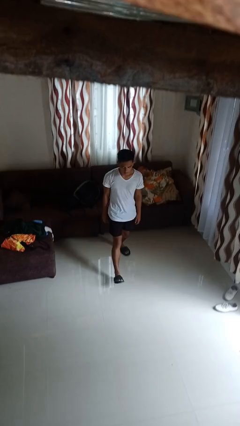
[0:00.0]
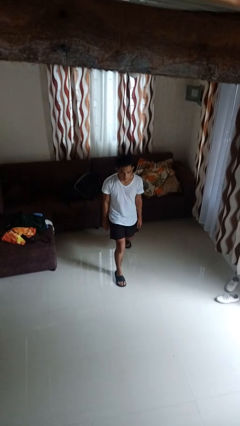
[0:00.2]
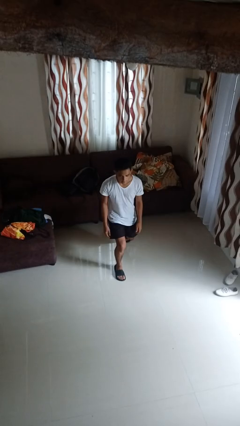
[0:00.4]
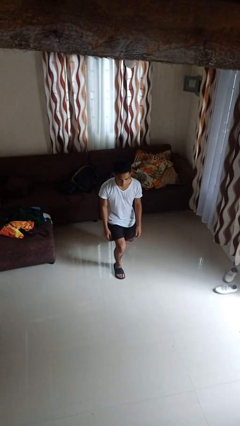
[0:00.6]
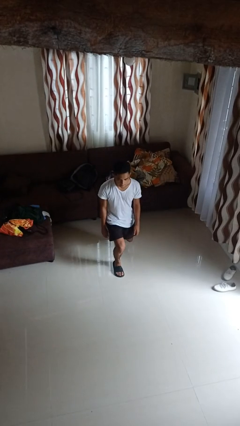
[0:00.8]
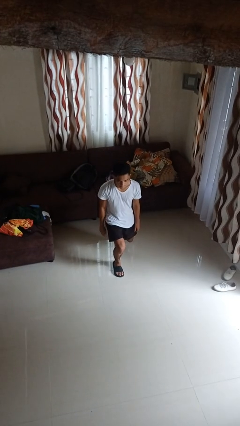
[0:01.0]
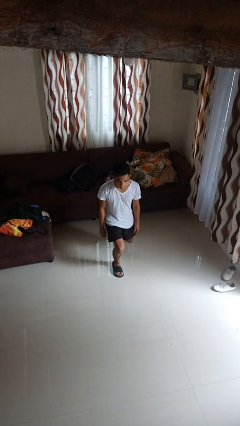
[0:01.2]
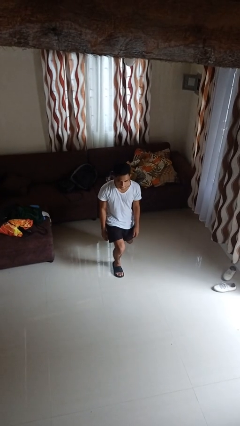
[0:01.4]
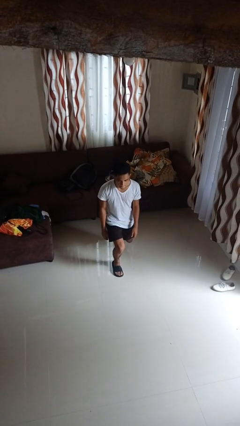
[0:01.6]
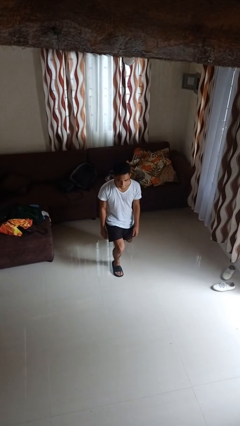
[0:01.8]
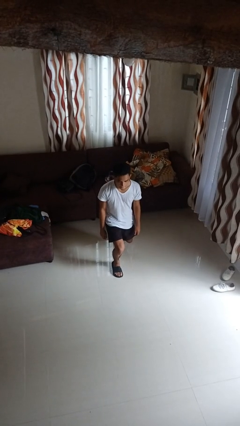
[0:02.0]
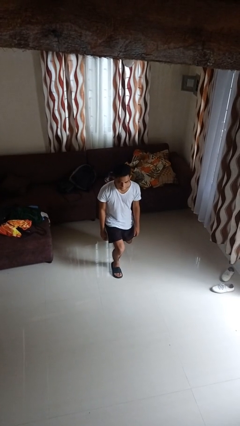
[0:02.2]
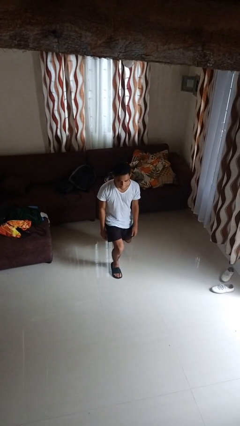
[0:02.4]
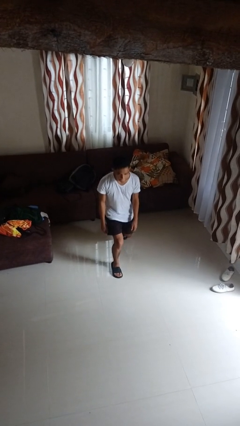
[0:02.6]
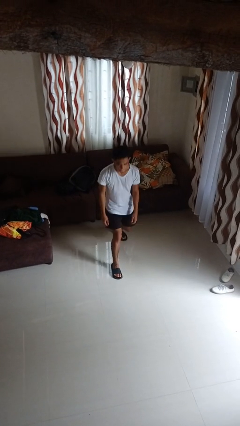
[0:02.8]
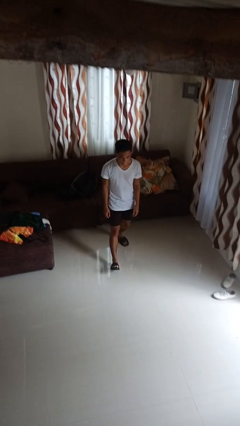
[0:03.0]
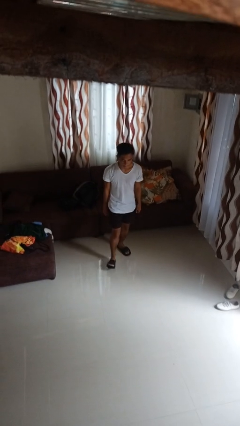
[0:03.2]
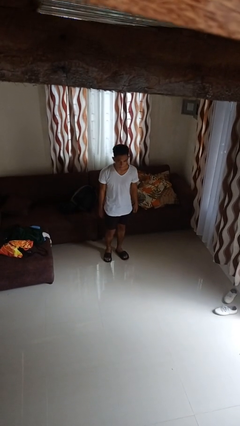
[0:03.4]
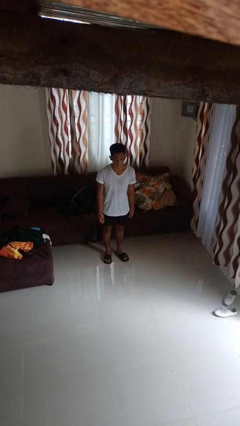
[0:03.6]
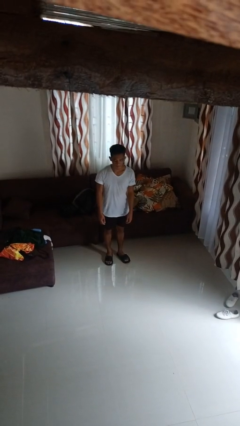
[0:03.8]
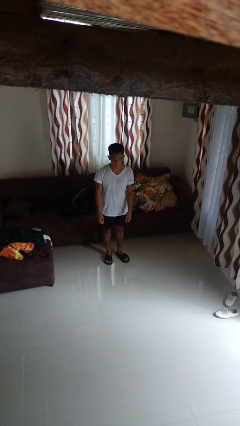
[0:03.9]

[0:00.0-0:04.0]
person exercises with lunges

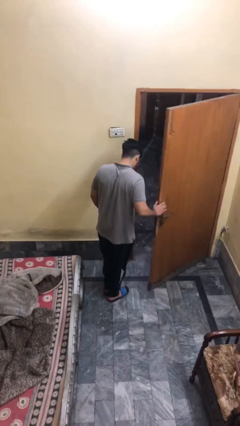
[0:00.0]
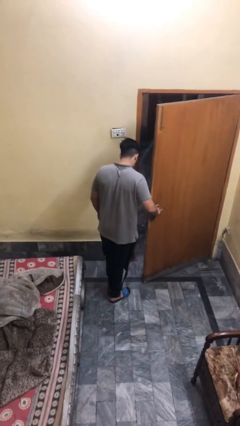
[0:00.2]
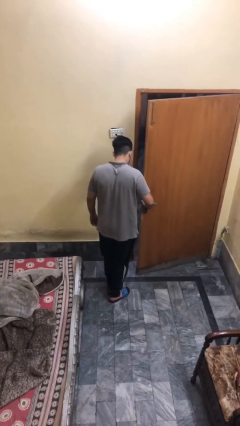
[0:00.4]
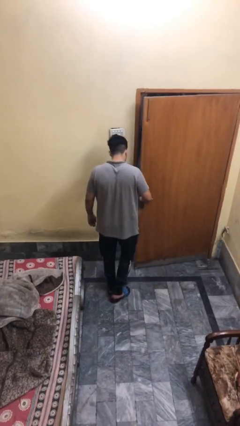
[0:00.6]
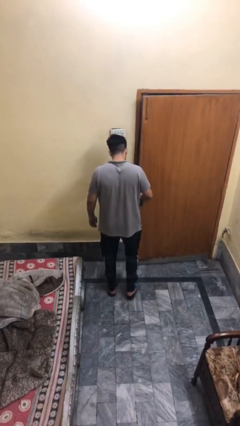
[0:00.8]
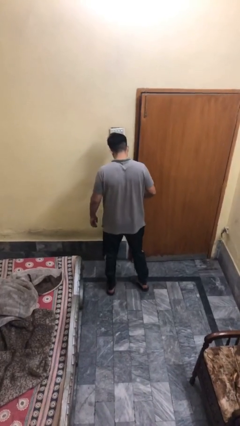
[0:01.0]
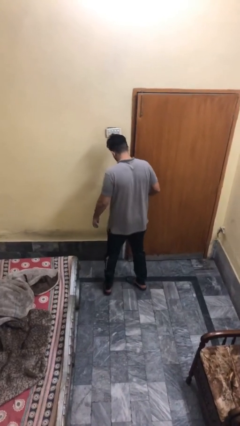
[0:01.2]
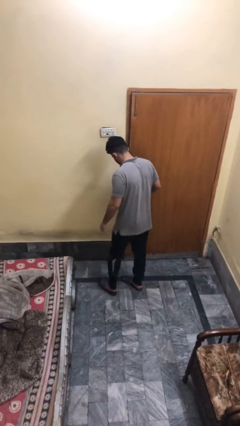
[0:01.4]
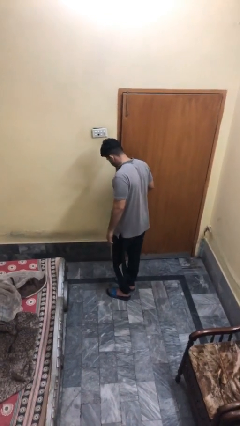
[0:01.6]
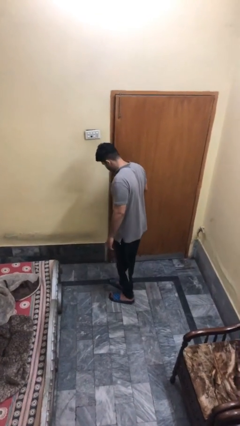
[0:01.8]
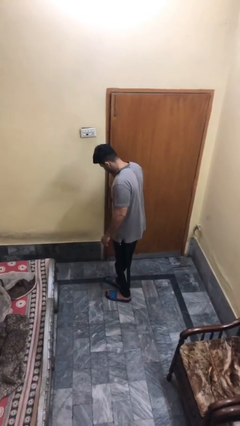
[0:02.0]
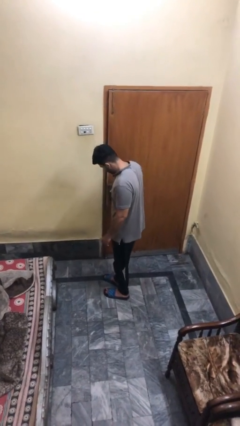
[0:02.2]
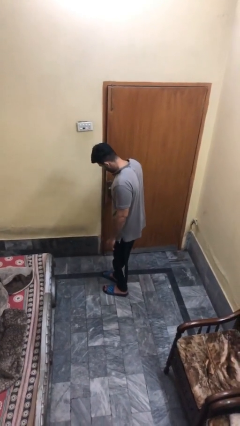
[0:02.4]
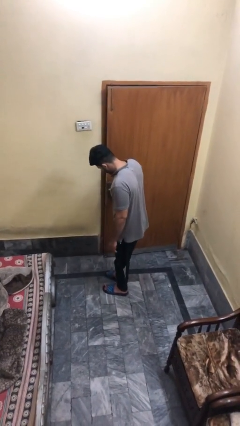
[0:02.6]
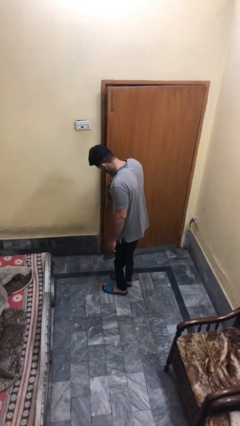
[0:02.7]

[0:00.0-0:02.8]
person closes facility door

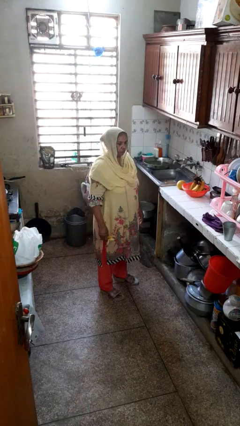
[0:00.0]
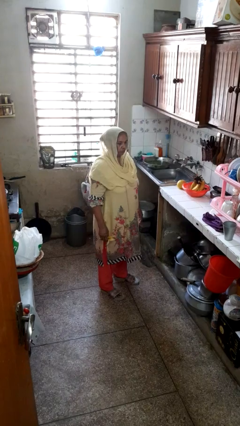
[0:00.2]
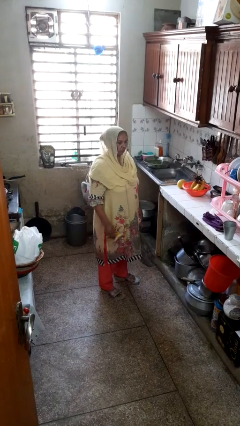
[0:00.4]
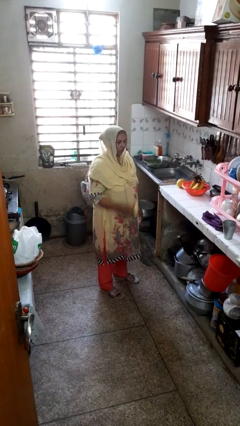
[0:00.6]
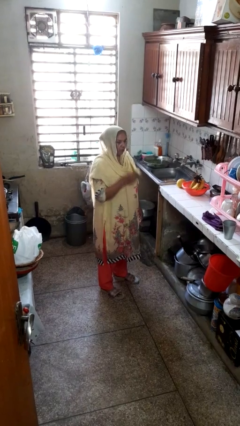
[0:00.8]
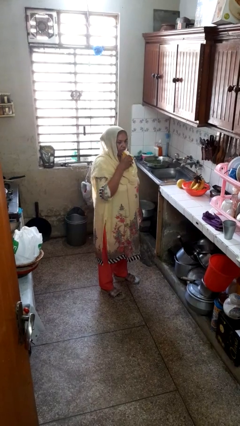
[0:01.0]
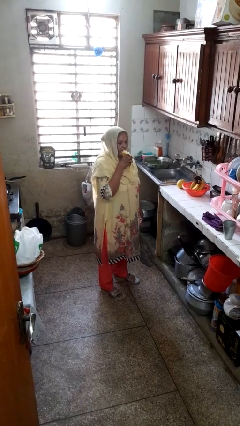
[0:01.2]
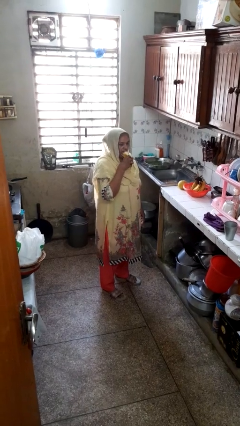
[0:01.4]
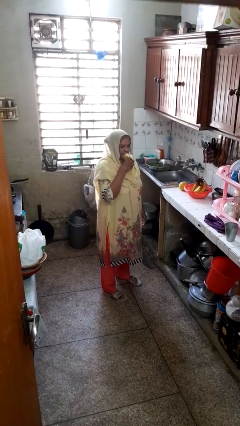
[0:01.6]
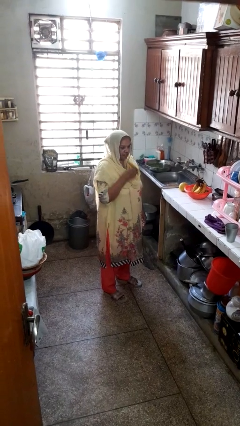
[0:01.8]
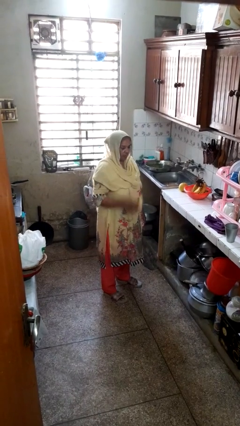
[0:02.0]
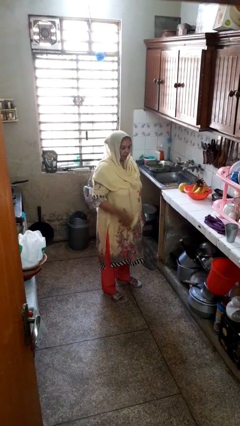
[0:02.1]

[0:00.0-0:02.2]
person eats banana

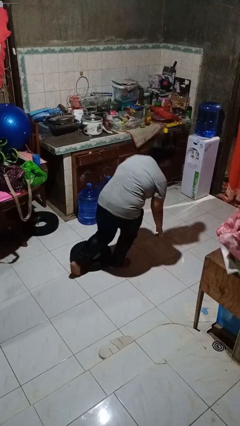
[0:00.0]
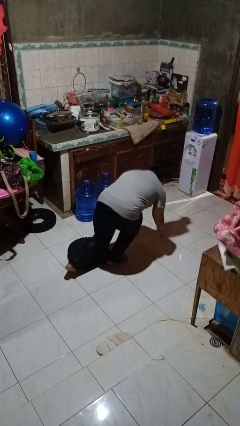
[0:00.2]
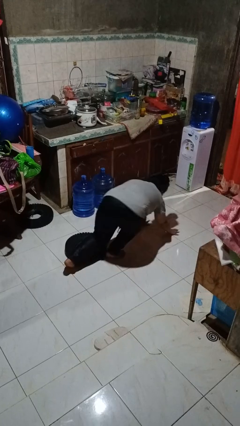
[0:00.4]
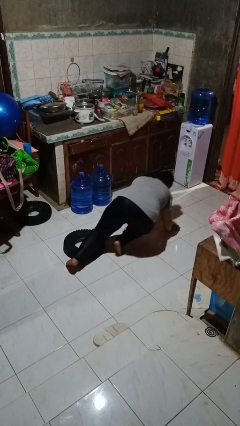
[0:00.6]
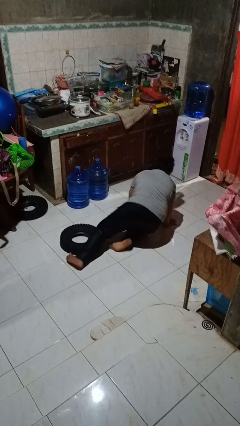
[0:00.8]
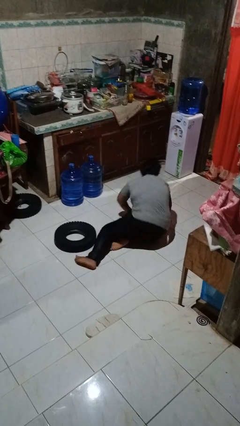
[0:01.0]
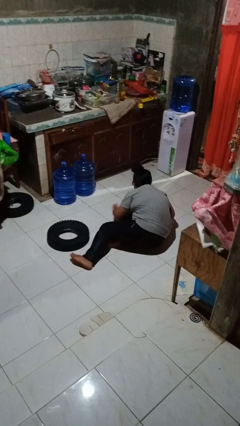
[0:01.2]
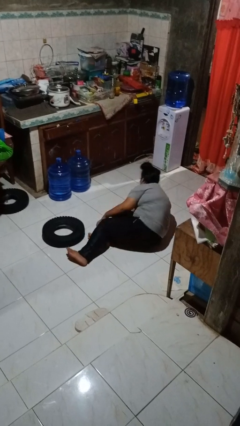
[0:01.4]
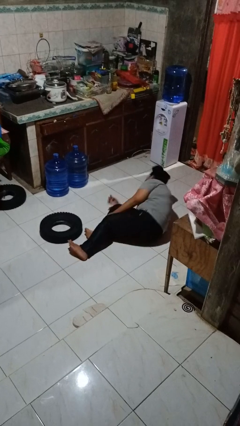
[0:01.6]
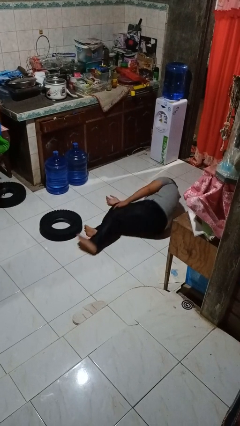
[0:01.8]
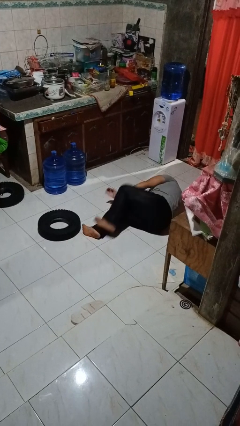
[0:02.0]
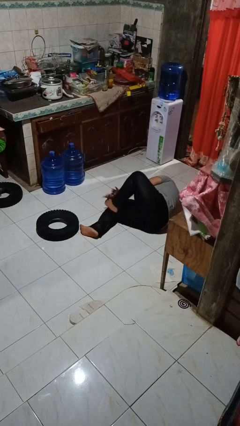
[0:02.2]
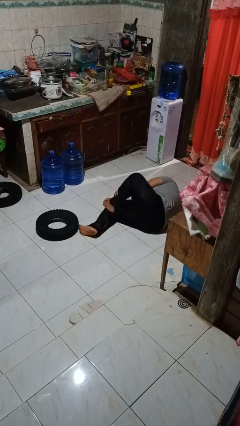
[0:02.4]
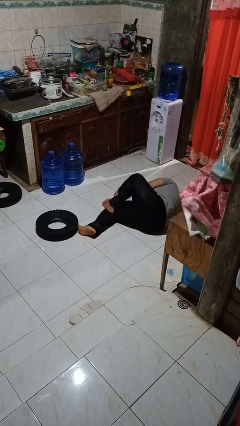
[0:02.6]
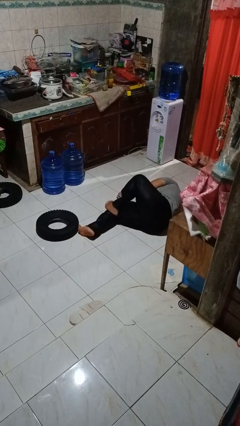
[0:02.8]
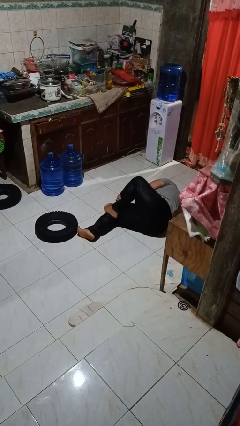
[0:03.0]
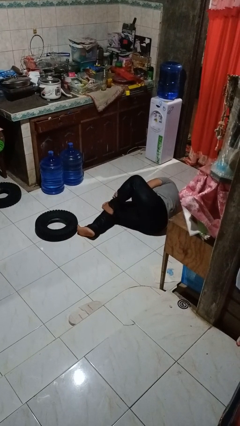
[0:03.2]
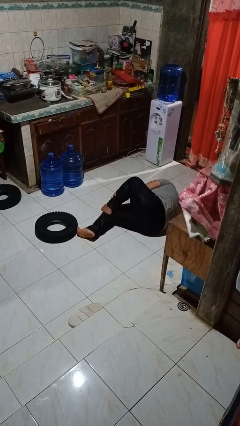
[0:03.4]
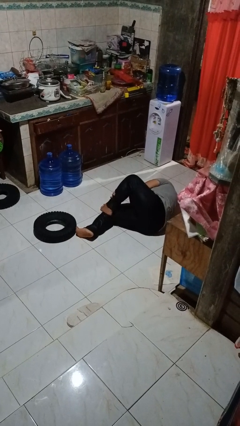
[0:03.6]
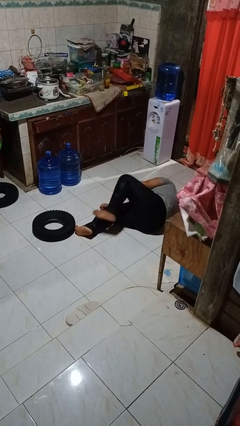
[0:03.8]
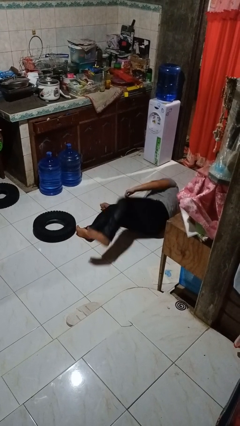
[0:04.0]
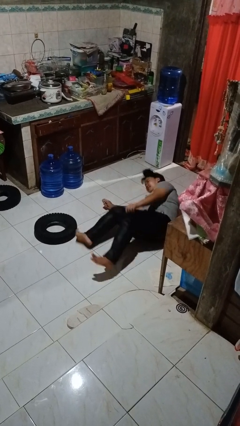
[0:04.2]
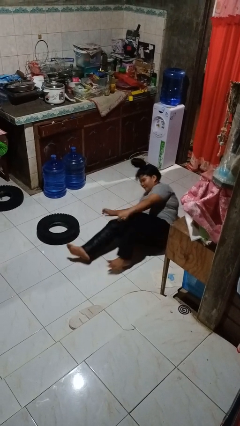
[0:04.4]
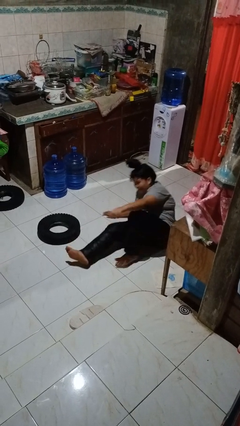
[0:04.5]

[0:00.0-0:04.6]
person lies down on floor

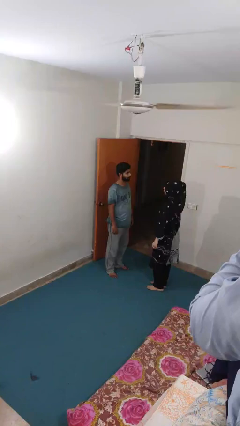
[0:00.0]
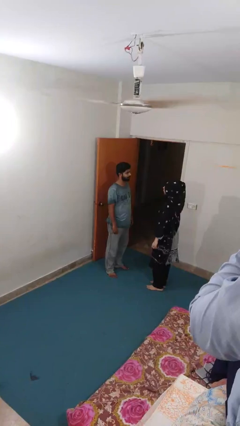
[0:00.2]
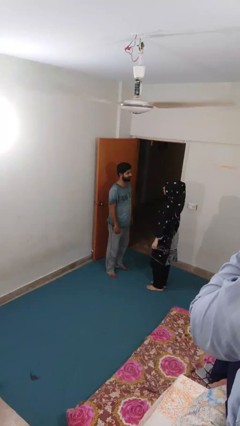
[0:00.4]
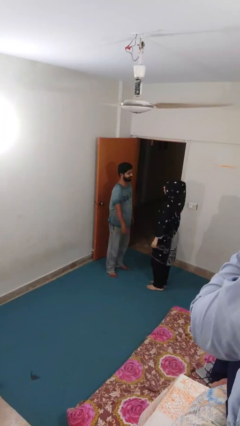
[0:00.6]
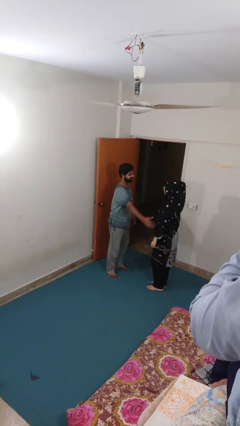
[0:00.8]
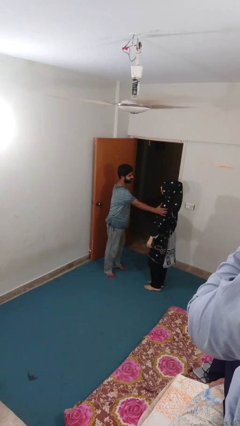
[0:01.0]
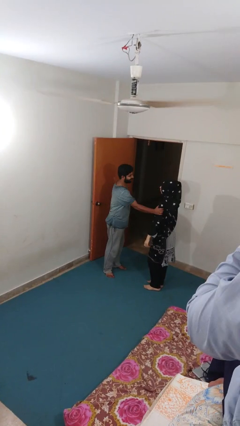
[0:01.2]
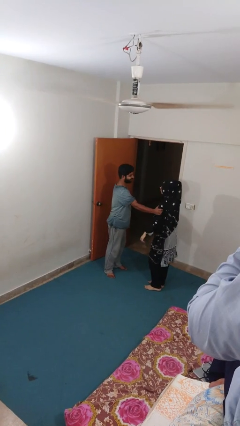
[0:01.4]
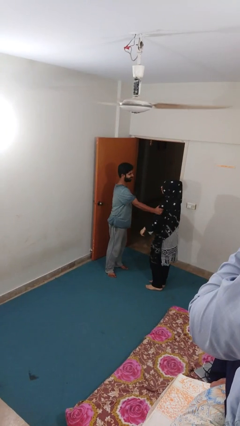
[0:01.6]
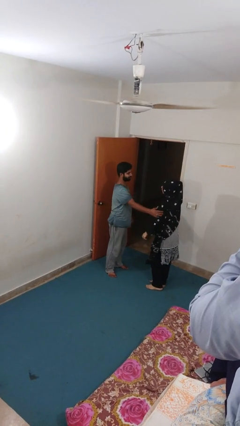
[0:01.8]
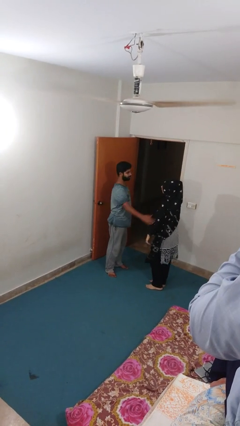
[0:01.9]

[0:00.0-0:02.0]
person grabs person by bicep

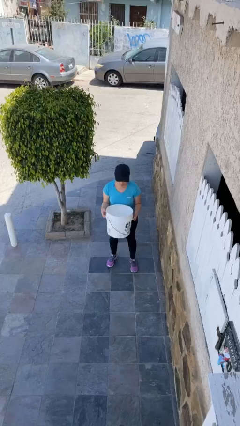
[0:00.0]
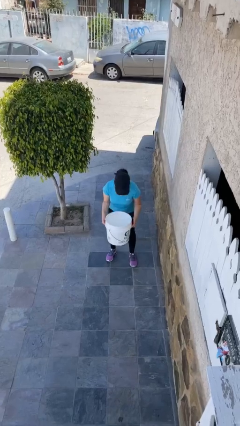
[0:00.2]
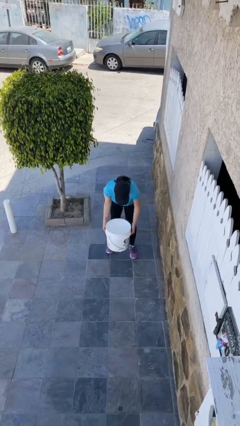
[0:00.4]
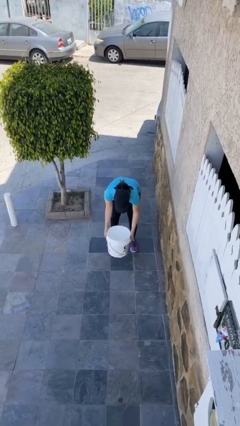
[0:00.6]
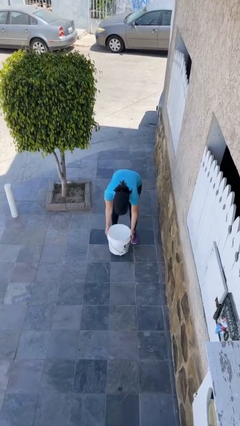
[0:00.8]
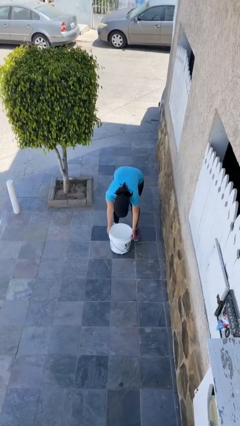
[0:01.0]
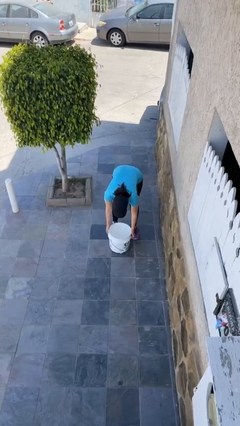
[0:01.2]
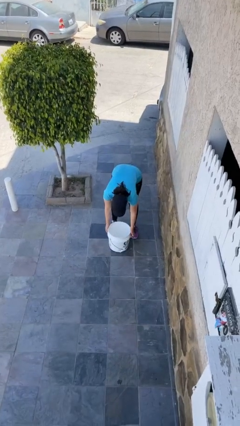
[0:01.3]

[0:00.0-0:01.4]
person puts down object on floor

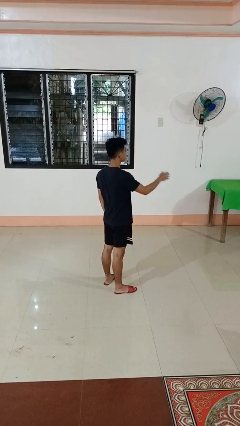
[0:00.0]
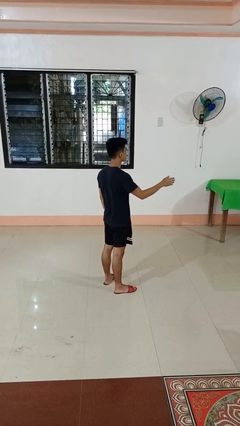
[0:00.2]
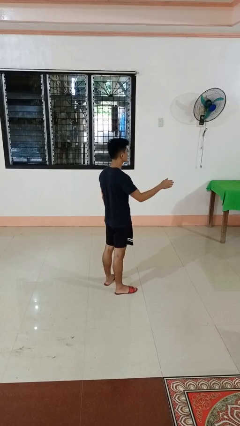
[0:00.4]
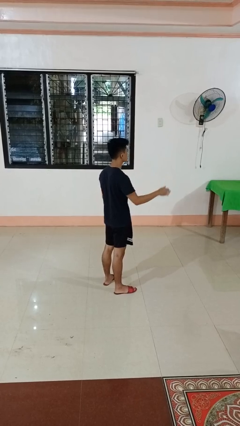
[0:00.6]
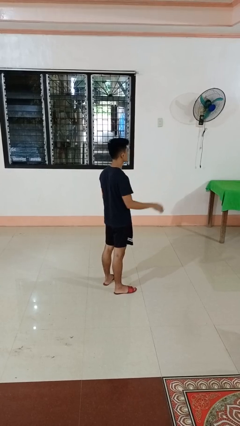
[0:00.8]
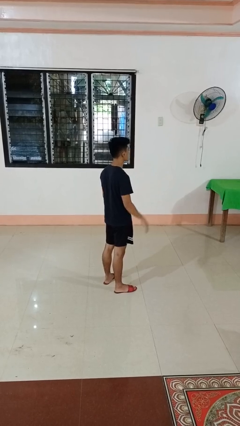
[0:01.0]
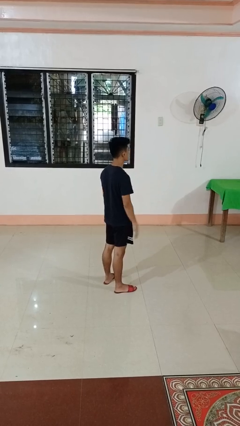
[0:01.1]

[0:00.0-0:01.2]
person gestures swipe right
